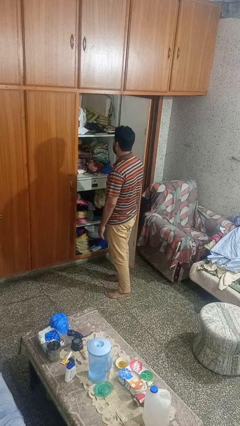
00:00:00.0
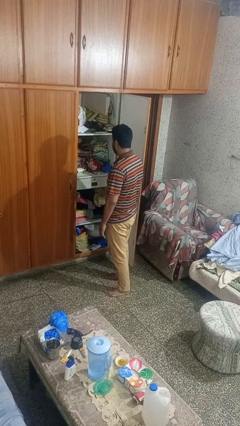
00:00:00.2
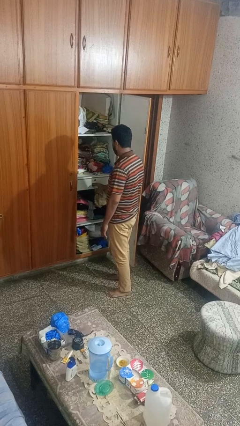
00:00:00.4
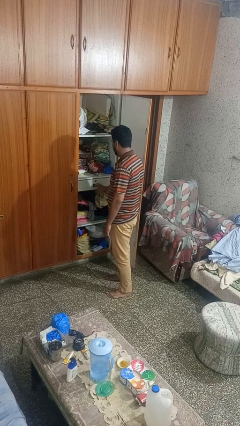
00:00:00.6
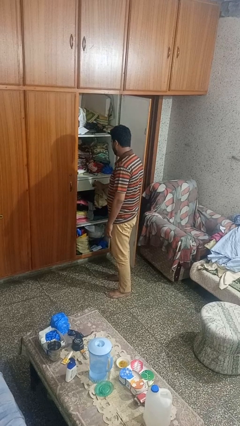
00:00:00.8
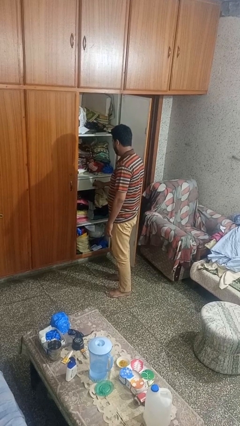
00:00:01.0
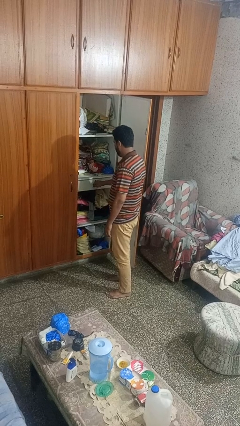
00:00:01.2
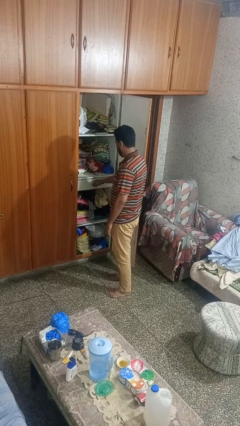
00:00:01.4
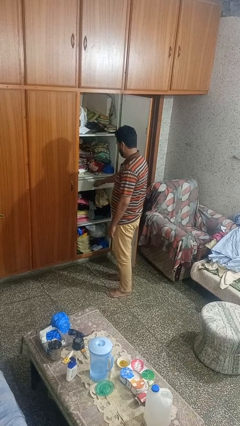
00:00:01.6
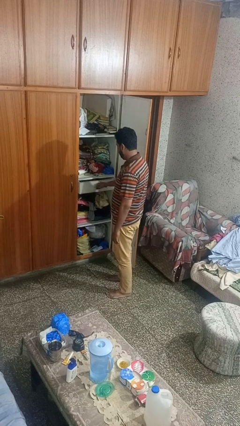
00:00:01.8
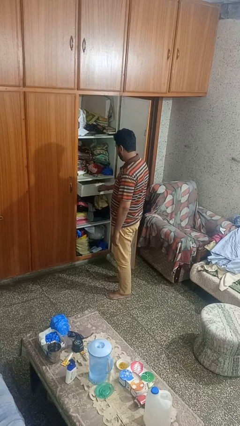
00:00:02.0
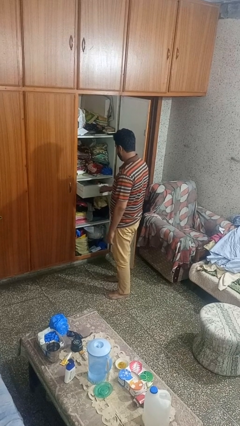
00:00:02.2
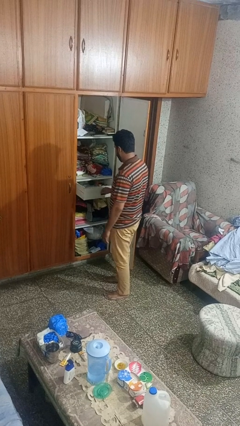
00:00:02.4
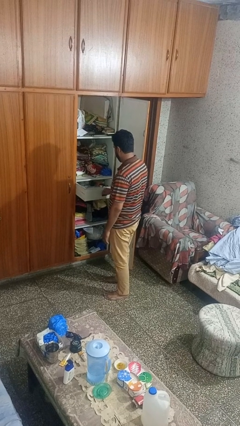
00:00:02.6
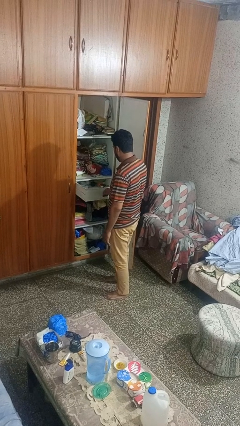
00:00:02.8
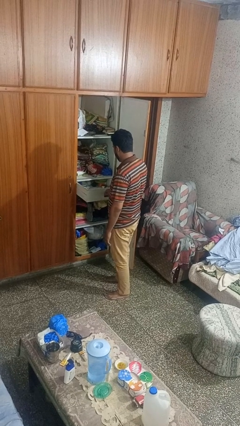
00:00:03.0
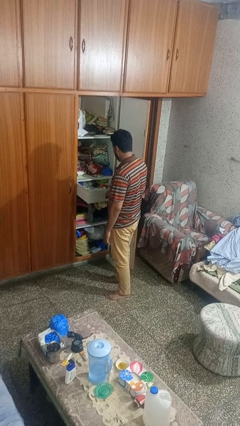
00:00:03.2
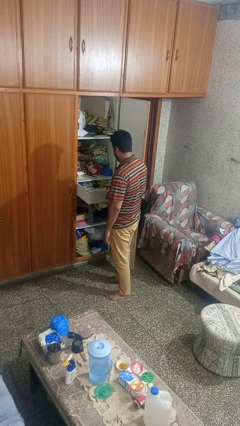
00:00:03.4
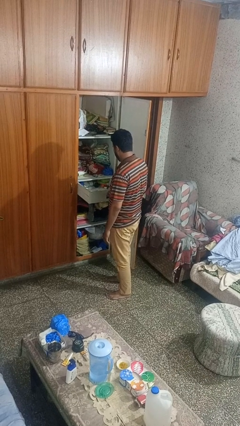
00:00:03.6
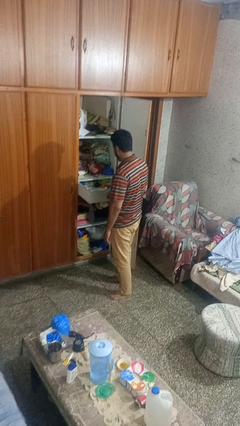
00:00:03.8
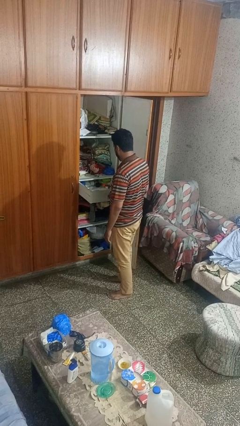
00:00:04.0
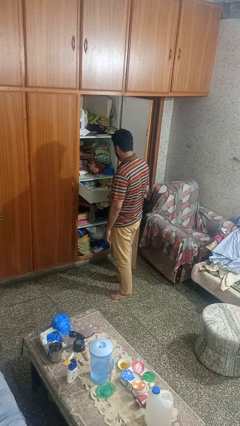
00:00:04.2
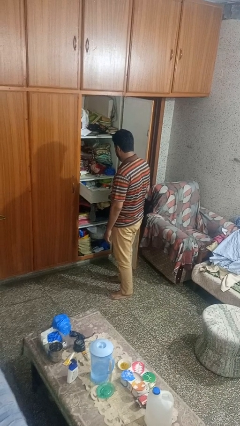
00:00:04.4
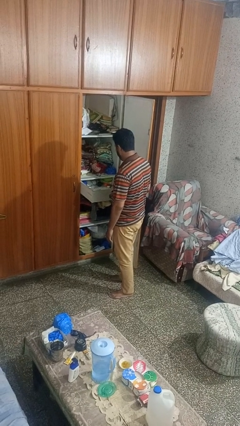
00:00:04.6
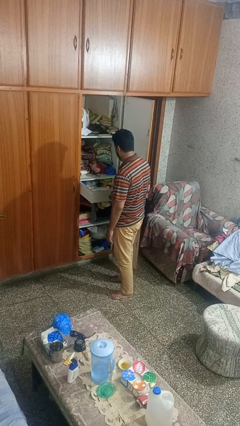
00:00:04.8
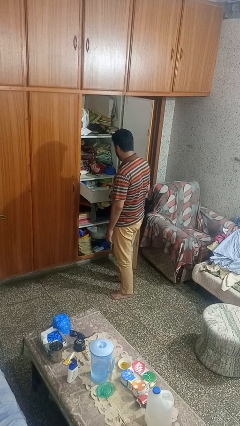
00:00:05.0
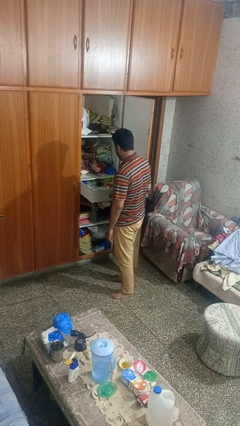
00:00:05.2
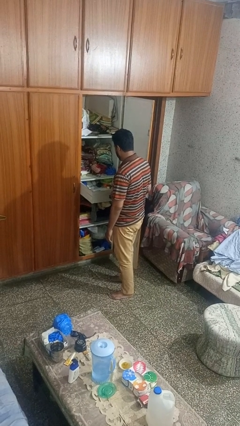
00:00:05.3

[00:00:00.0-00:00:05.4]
person opens dresser drawer

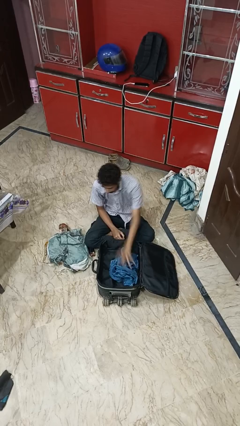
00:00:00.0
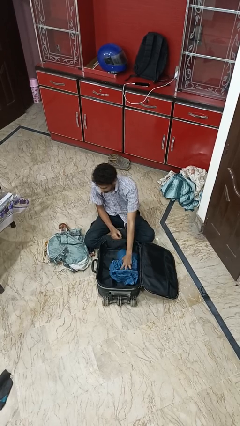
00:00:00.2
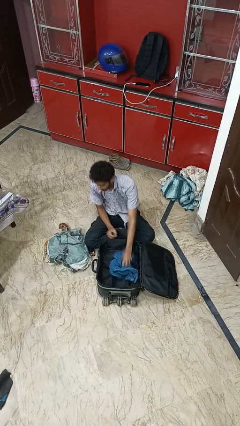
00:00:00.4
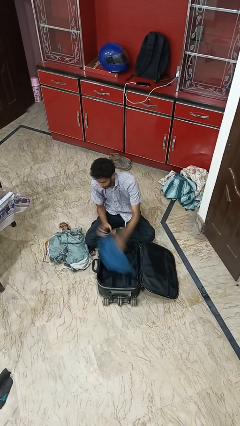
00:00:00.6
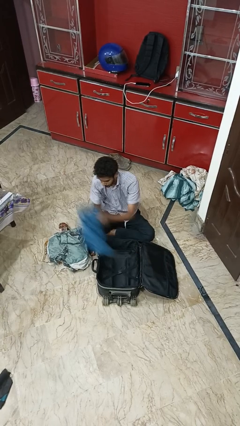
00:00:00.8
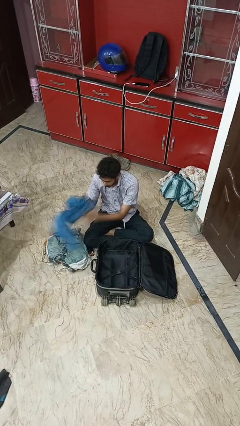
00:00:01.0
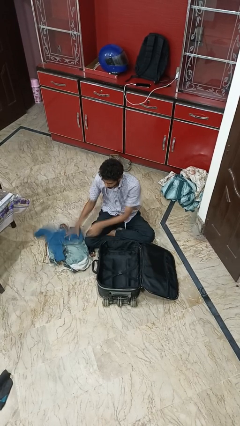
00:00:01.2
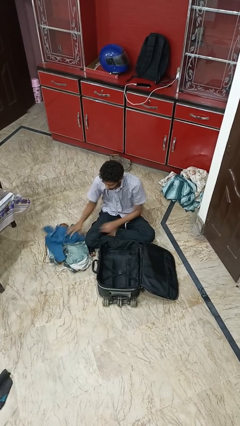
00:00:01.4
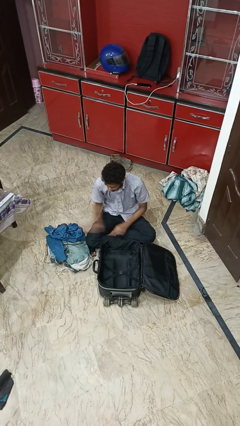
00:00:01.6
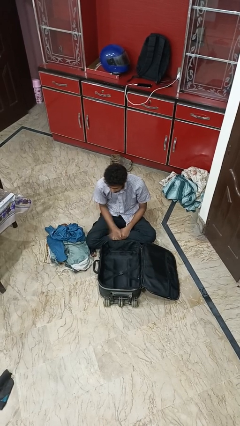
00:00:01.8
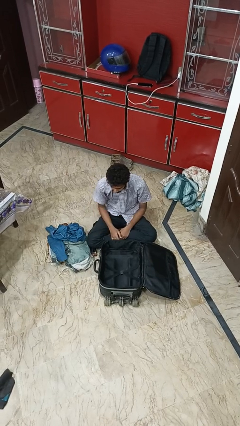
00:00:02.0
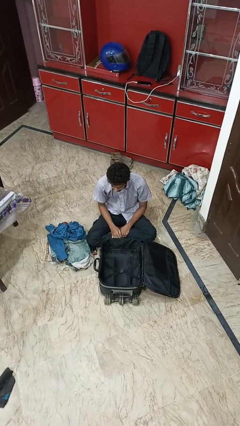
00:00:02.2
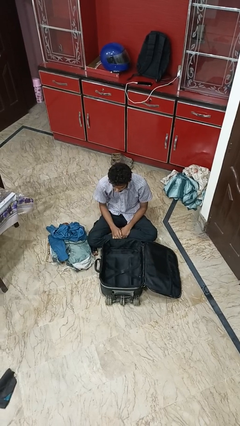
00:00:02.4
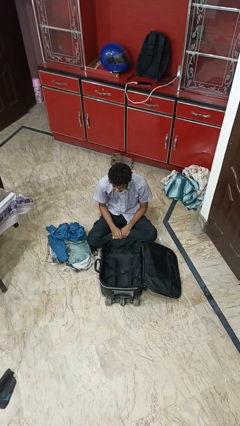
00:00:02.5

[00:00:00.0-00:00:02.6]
person unloads clothes from suitcase

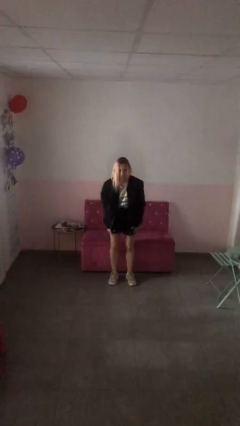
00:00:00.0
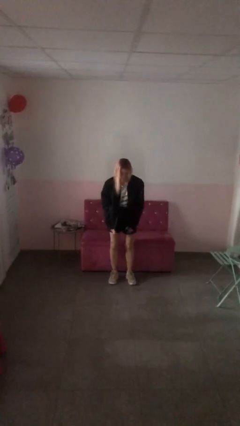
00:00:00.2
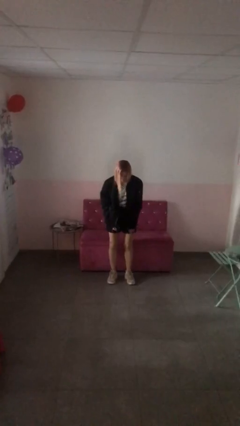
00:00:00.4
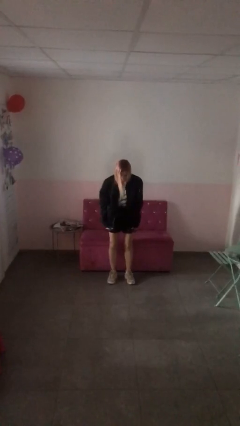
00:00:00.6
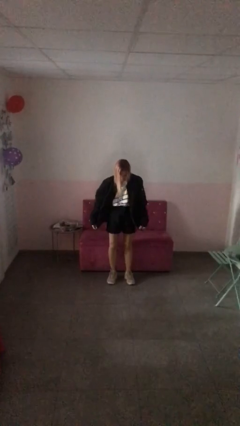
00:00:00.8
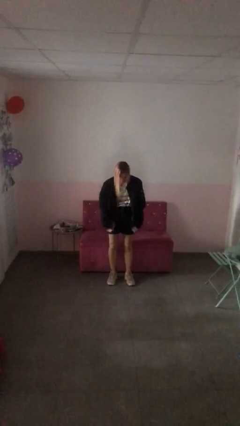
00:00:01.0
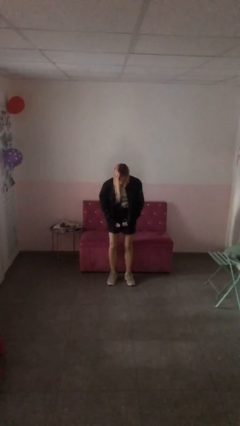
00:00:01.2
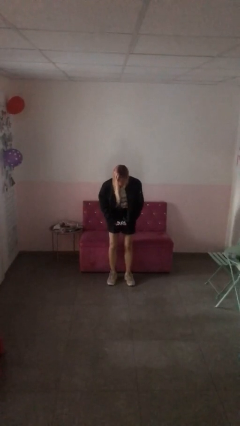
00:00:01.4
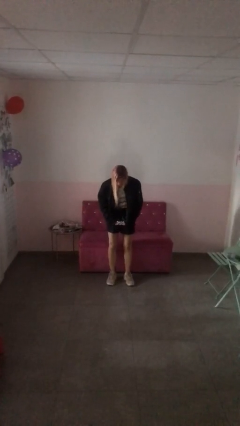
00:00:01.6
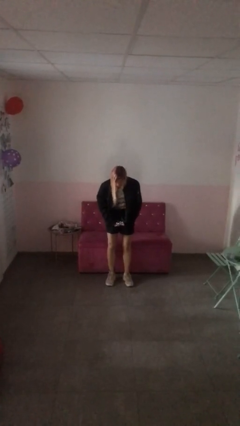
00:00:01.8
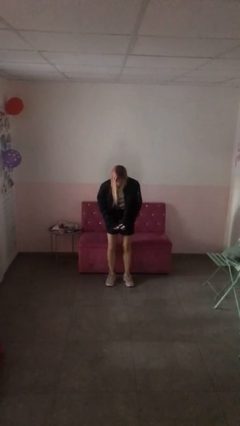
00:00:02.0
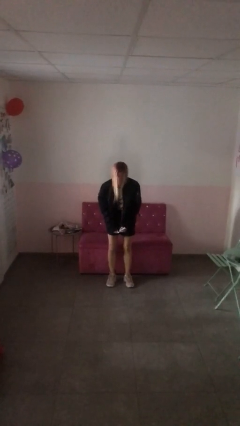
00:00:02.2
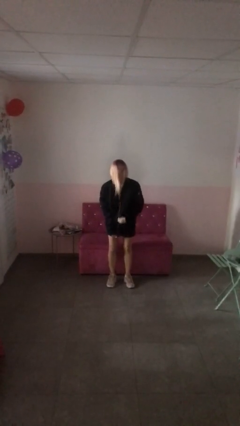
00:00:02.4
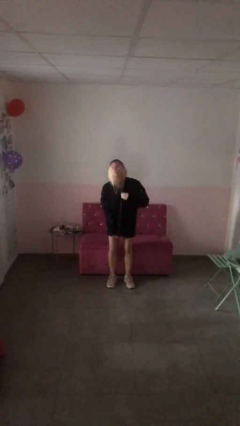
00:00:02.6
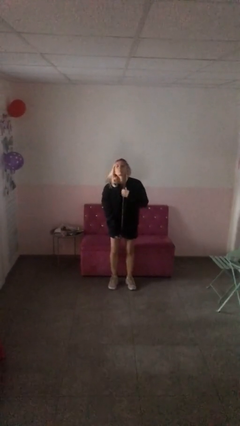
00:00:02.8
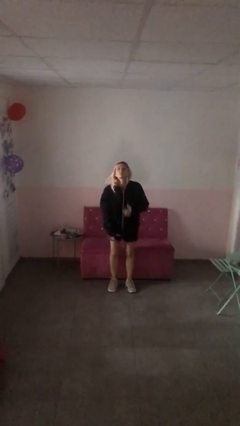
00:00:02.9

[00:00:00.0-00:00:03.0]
person zips up jacket

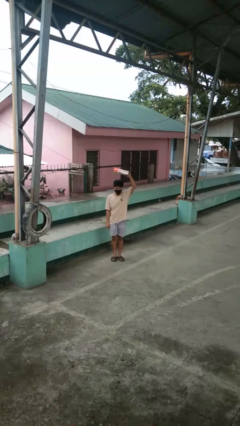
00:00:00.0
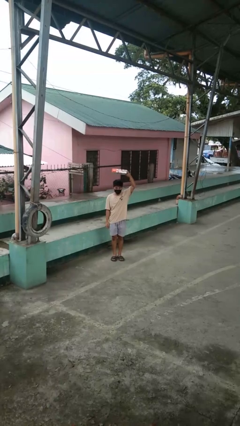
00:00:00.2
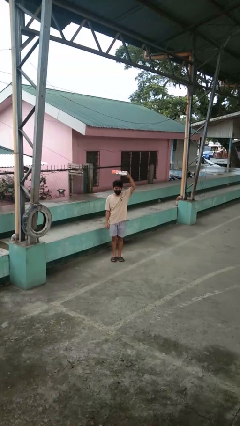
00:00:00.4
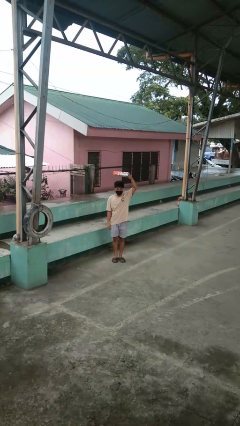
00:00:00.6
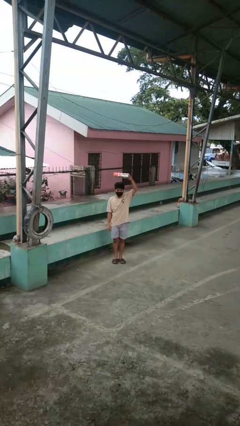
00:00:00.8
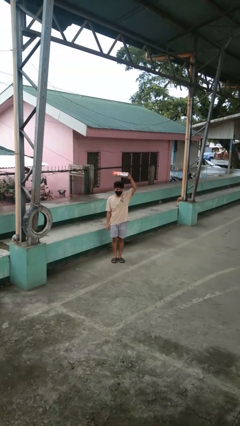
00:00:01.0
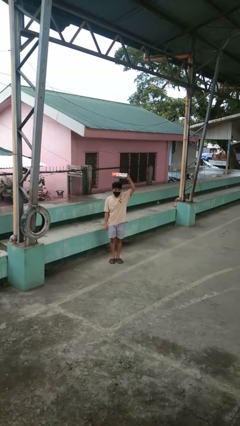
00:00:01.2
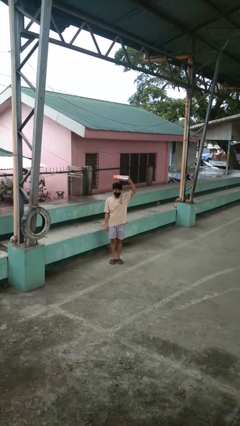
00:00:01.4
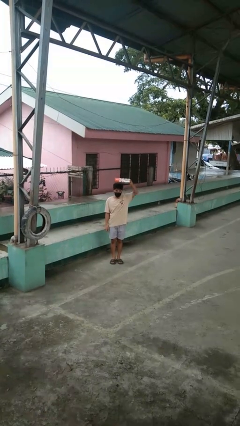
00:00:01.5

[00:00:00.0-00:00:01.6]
person holds object above head

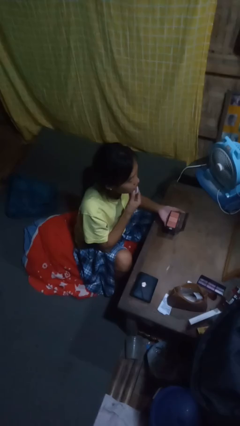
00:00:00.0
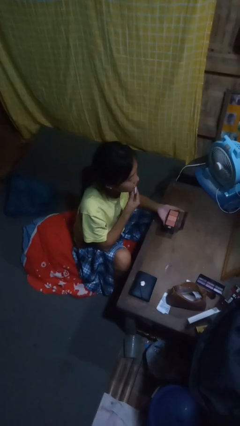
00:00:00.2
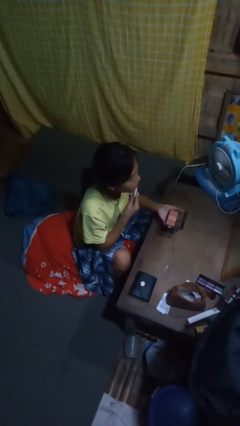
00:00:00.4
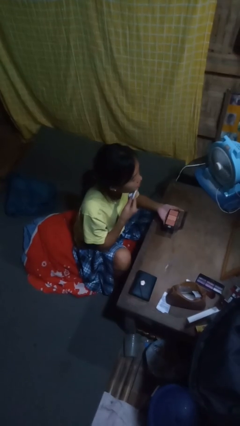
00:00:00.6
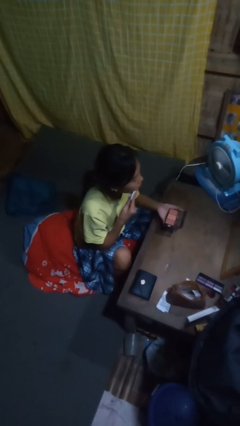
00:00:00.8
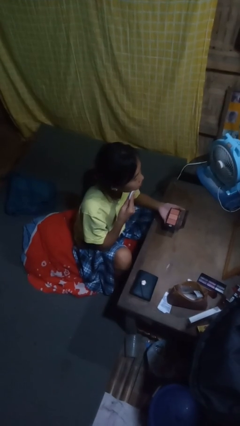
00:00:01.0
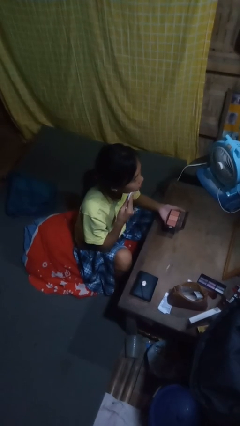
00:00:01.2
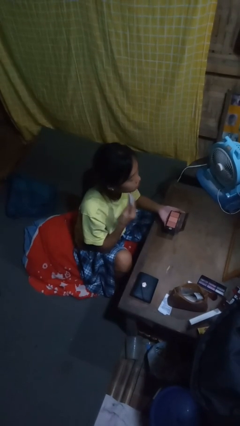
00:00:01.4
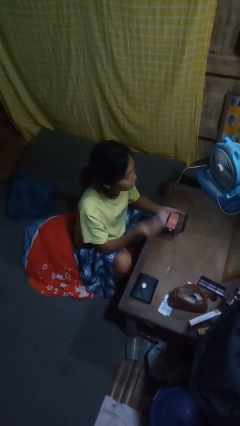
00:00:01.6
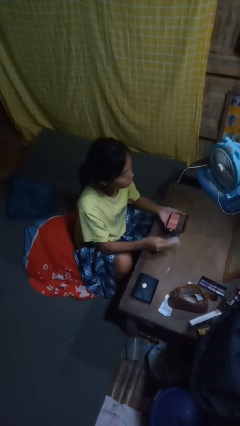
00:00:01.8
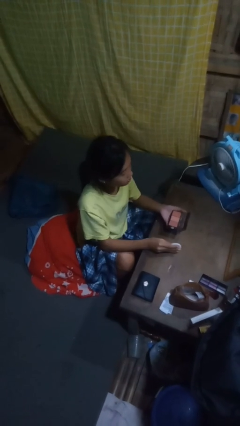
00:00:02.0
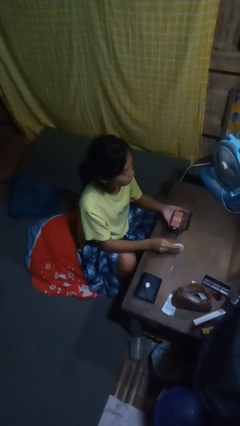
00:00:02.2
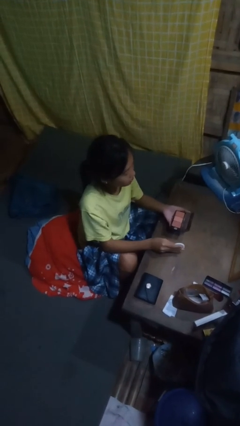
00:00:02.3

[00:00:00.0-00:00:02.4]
person applies foundation makeup

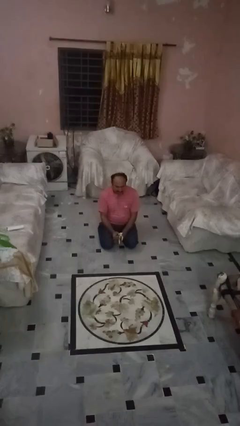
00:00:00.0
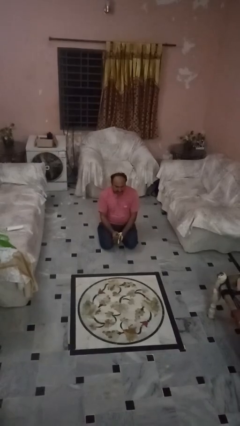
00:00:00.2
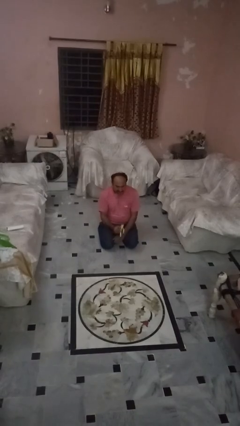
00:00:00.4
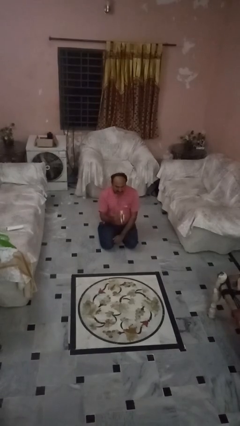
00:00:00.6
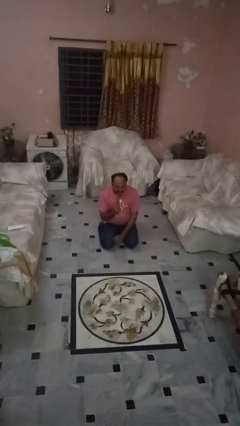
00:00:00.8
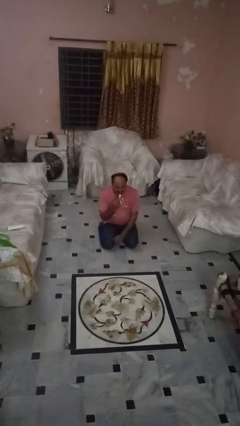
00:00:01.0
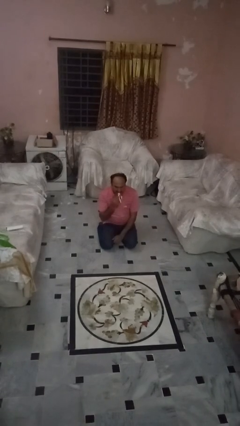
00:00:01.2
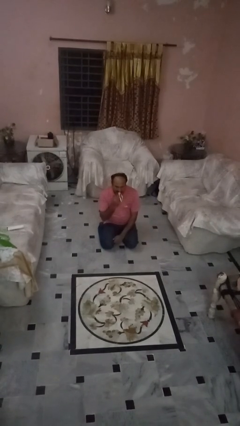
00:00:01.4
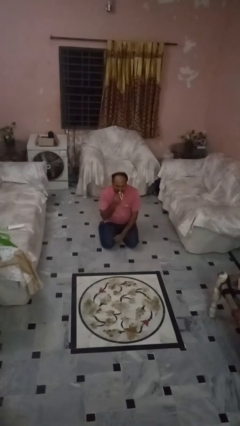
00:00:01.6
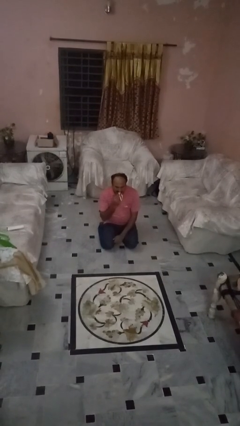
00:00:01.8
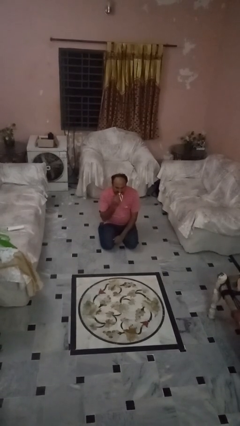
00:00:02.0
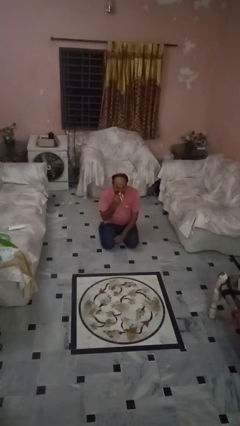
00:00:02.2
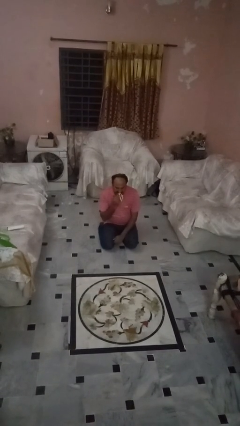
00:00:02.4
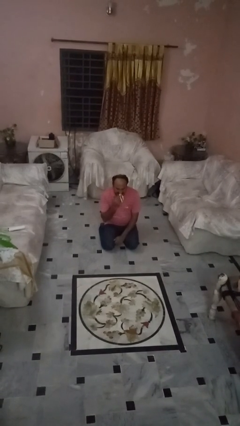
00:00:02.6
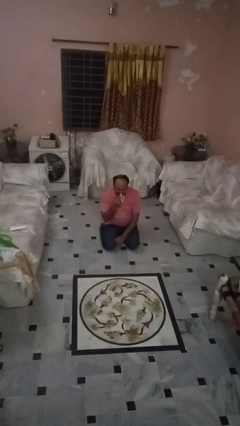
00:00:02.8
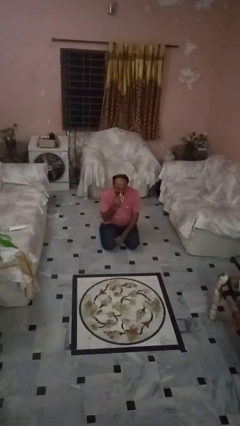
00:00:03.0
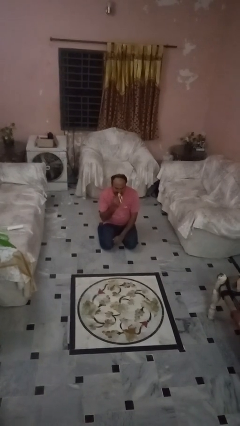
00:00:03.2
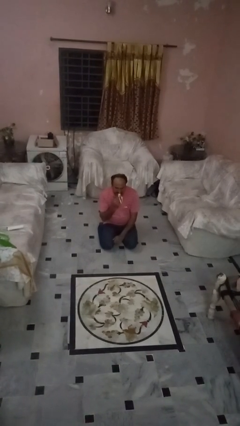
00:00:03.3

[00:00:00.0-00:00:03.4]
person eats banana
